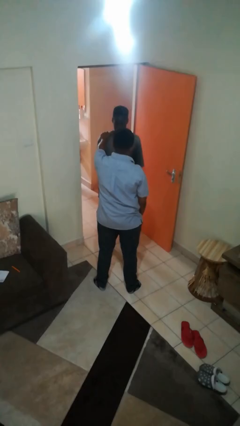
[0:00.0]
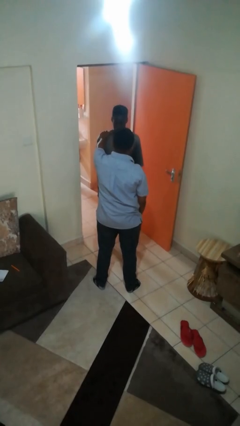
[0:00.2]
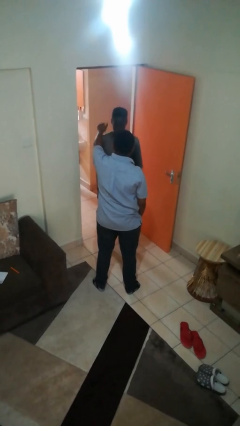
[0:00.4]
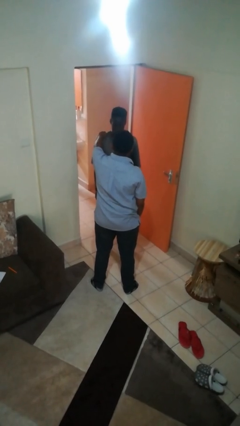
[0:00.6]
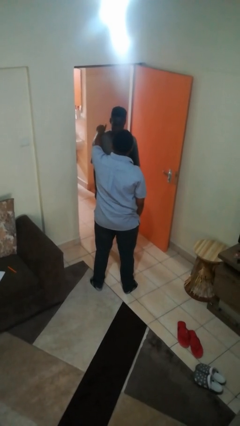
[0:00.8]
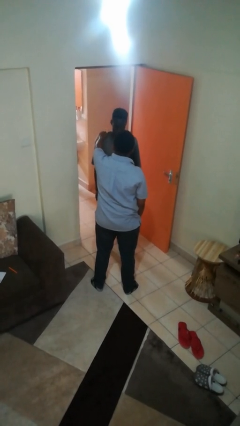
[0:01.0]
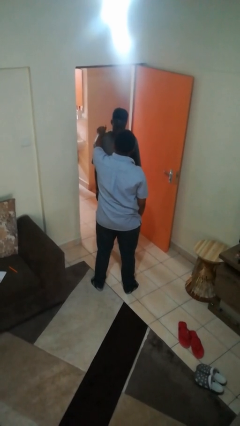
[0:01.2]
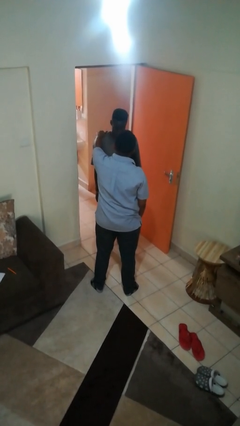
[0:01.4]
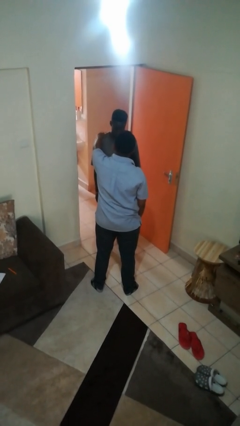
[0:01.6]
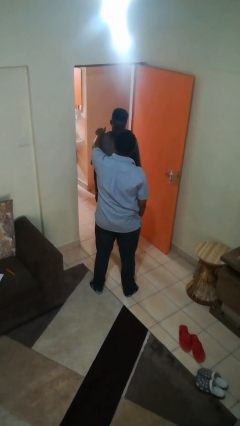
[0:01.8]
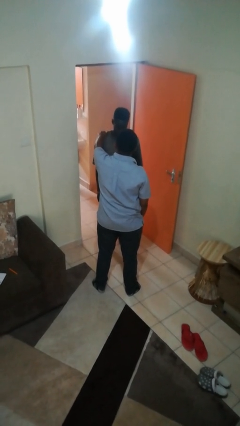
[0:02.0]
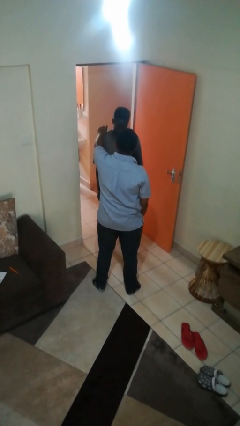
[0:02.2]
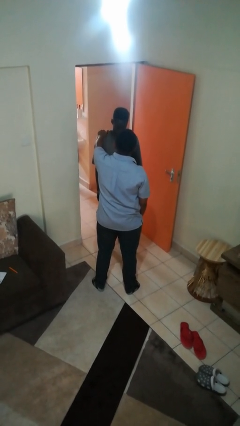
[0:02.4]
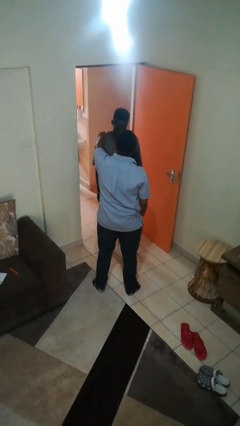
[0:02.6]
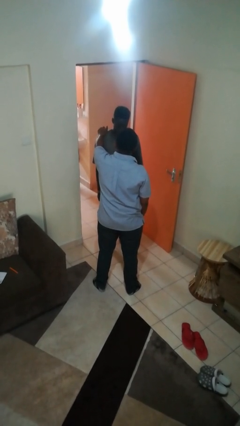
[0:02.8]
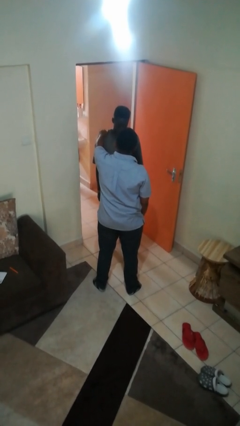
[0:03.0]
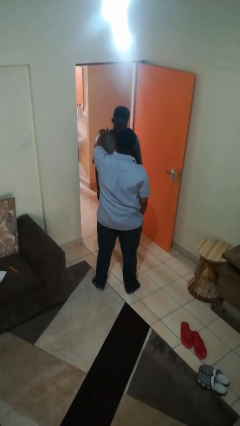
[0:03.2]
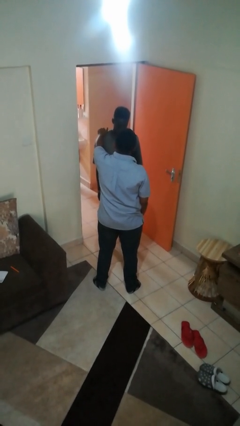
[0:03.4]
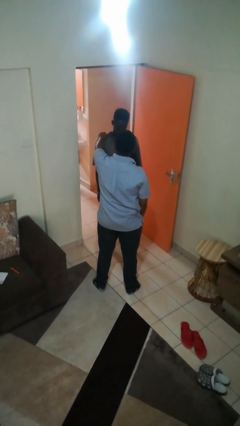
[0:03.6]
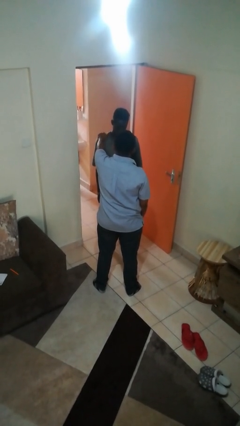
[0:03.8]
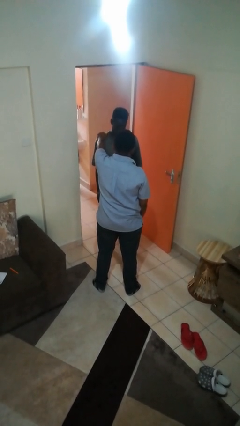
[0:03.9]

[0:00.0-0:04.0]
person pounds shoulders of person

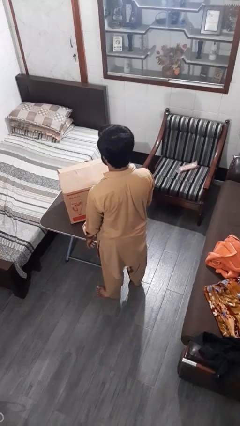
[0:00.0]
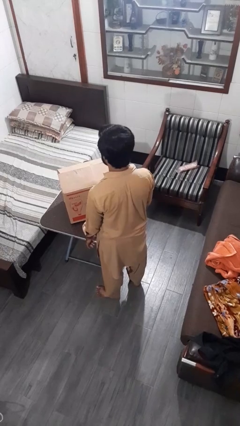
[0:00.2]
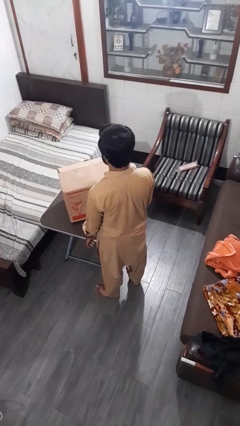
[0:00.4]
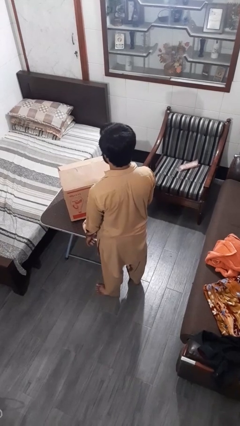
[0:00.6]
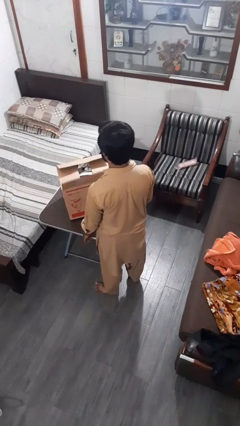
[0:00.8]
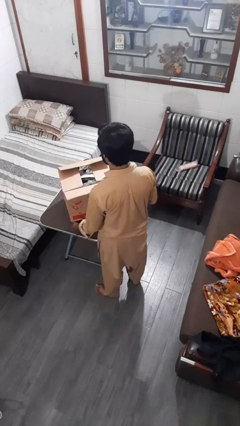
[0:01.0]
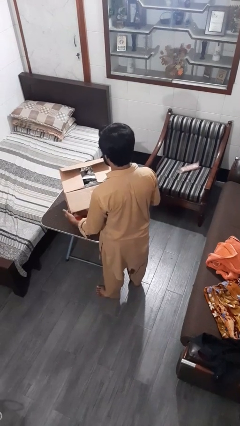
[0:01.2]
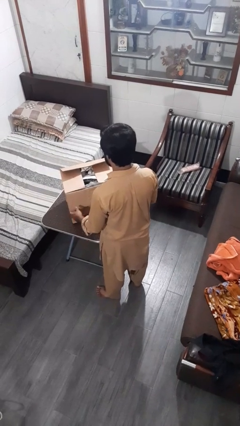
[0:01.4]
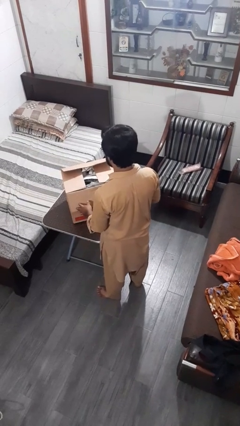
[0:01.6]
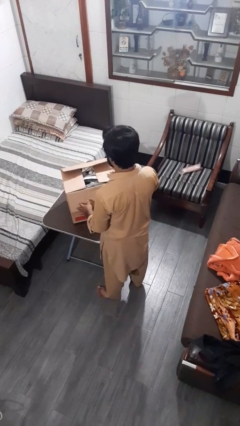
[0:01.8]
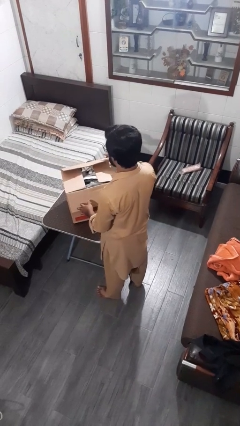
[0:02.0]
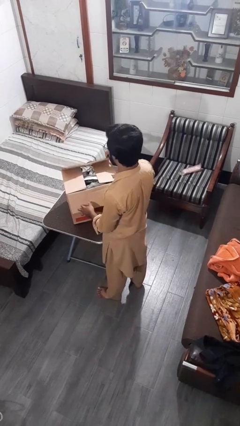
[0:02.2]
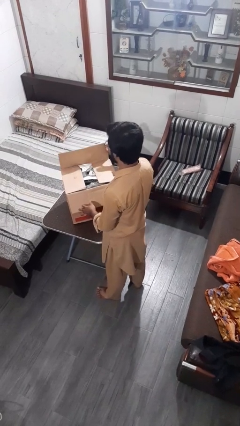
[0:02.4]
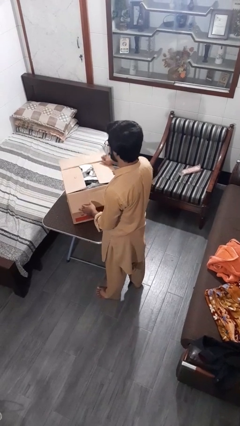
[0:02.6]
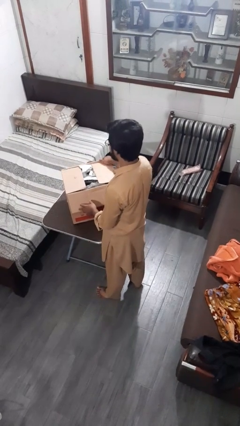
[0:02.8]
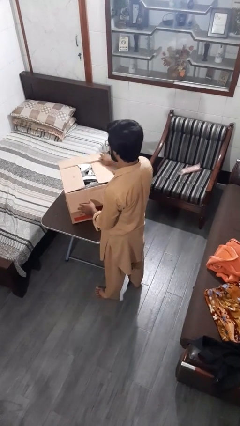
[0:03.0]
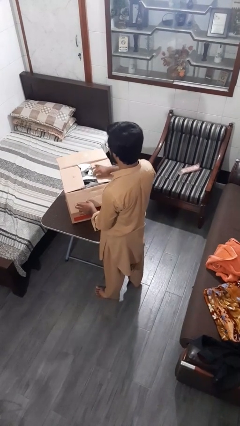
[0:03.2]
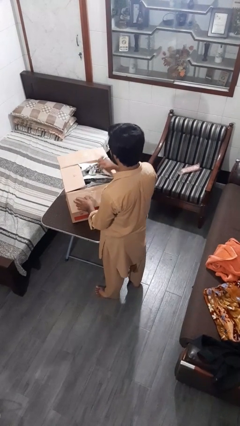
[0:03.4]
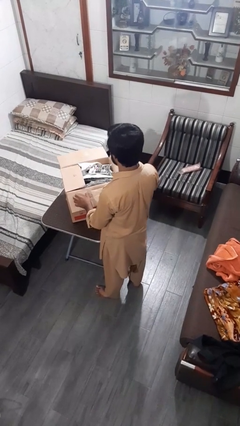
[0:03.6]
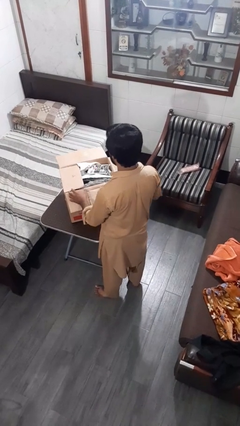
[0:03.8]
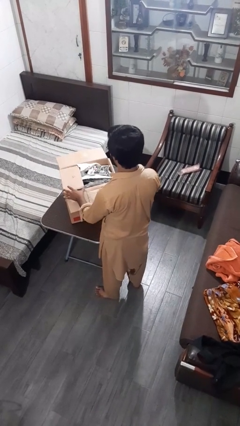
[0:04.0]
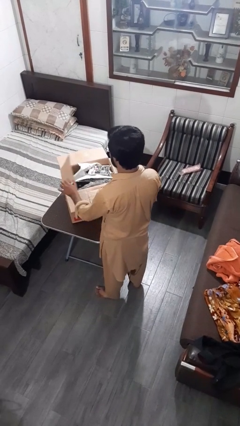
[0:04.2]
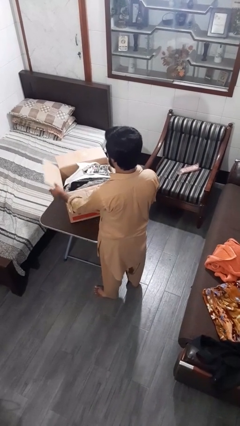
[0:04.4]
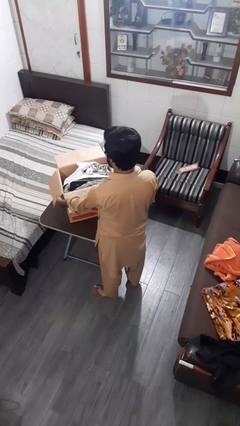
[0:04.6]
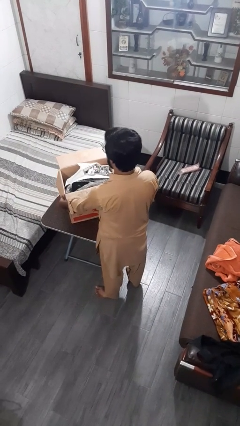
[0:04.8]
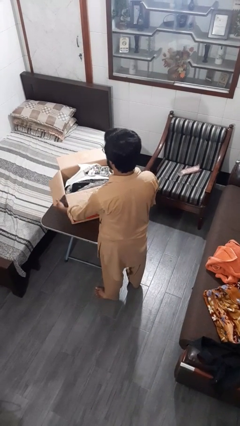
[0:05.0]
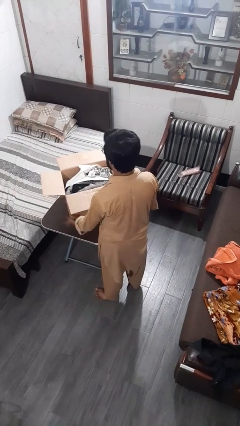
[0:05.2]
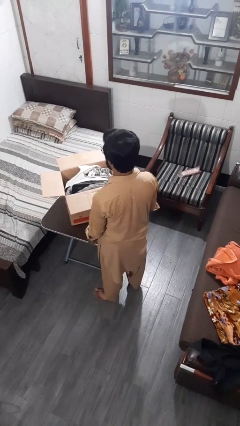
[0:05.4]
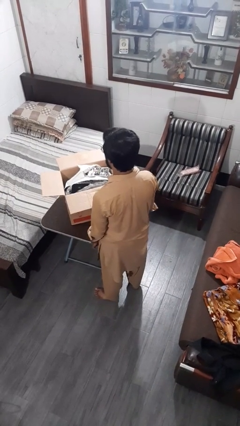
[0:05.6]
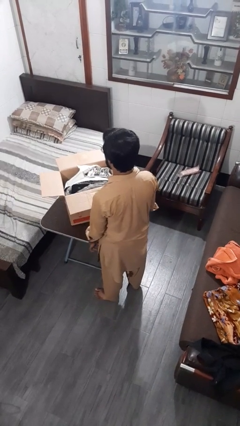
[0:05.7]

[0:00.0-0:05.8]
person opens box

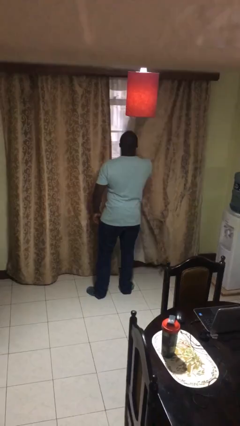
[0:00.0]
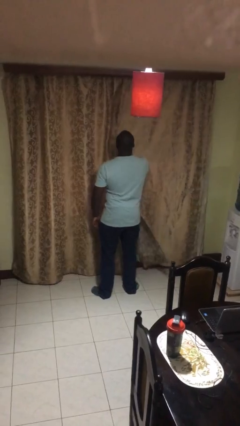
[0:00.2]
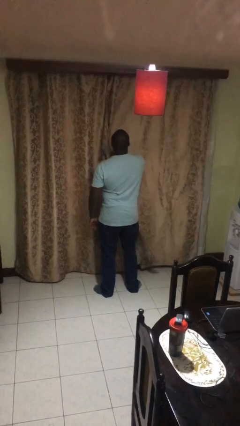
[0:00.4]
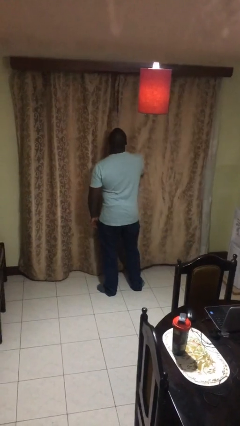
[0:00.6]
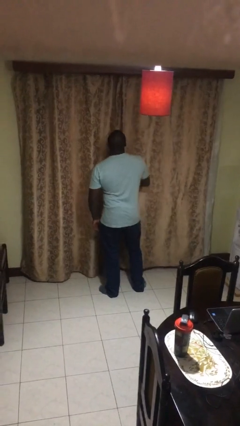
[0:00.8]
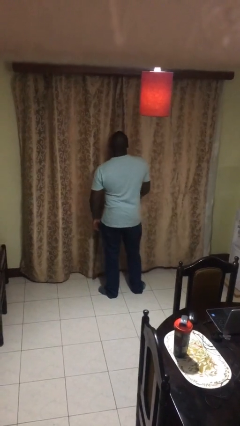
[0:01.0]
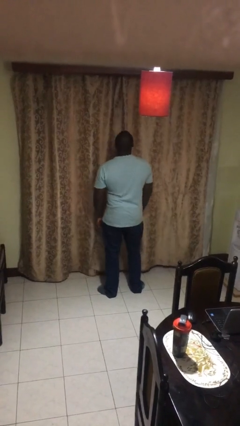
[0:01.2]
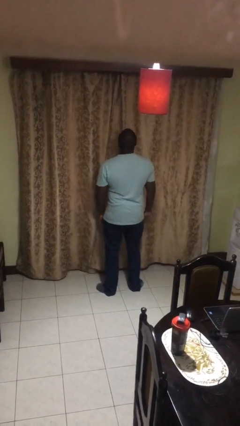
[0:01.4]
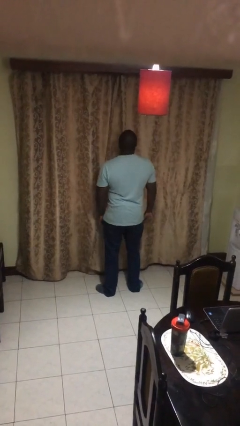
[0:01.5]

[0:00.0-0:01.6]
person closes curtains

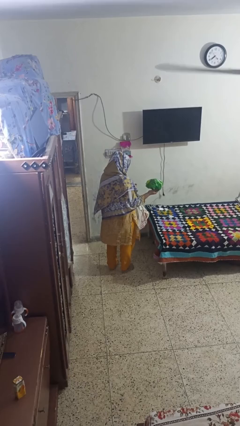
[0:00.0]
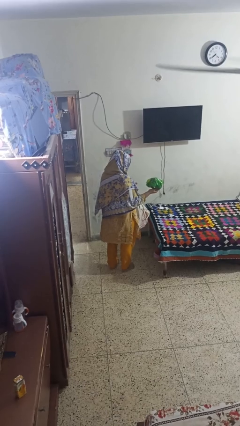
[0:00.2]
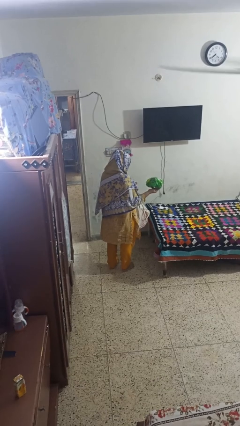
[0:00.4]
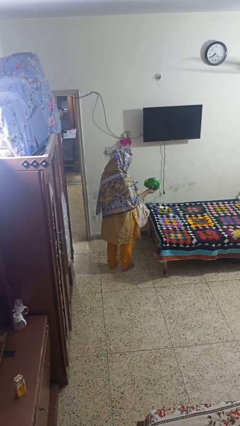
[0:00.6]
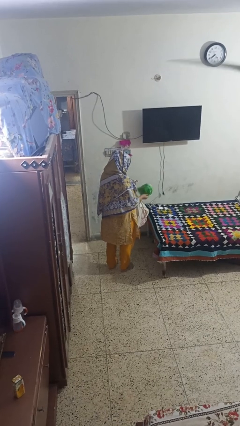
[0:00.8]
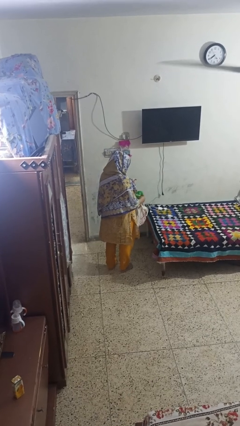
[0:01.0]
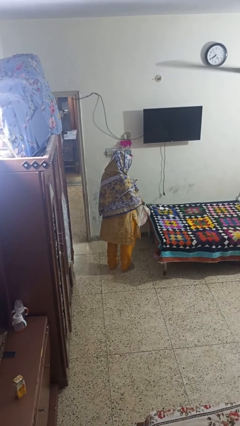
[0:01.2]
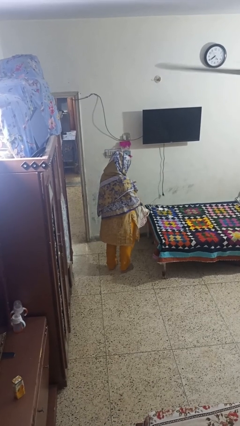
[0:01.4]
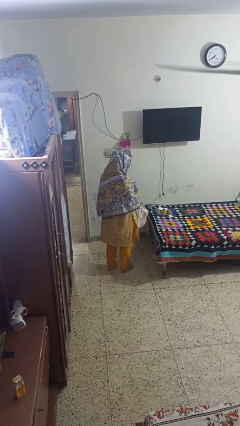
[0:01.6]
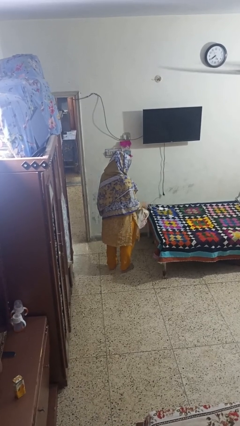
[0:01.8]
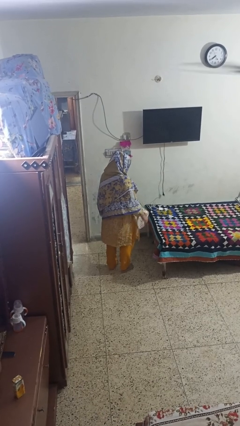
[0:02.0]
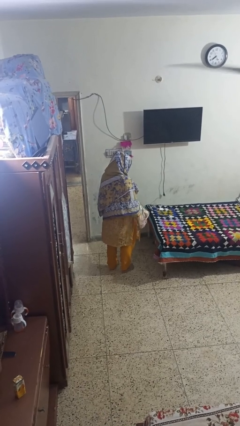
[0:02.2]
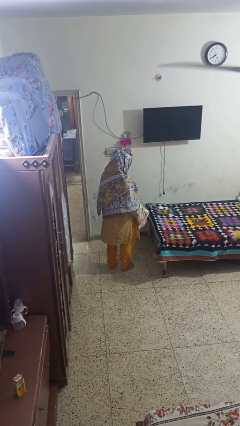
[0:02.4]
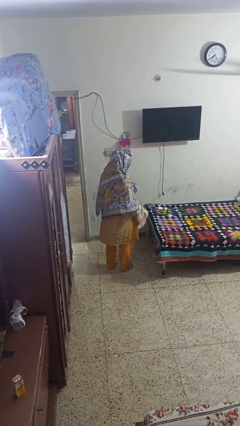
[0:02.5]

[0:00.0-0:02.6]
person puts object into bag

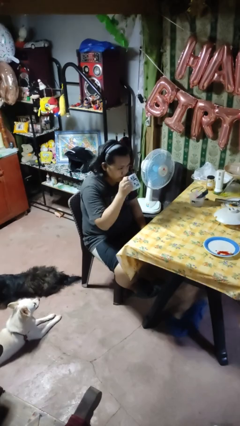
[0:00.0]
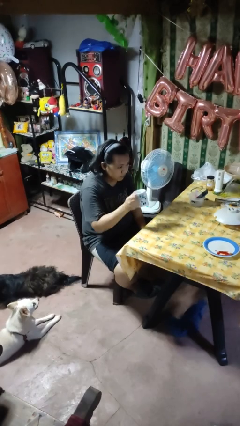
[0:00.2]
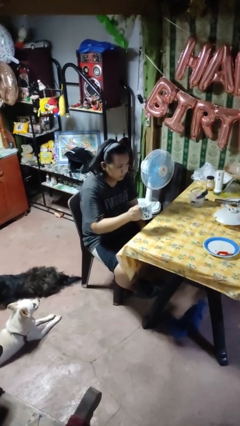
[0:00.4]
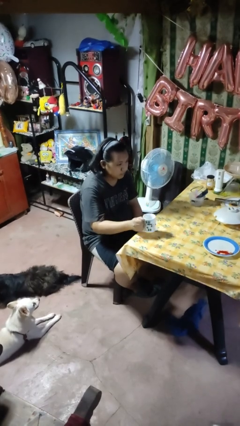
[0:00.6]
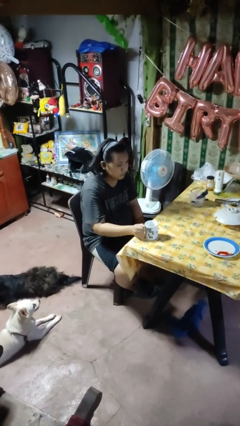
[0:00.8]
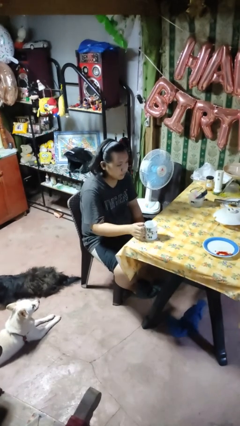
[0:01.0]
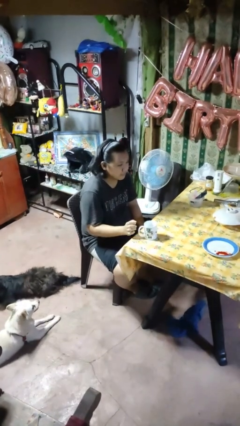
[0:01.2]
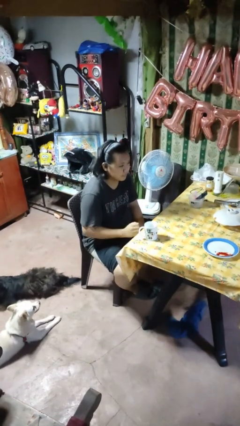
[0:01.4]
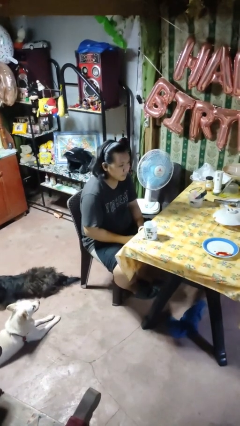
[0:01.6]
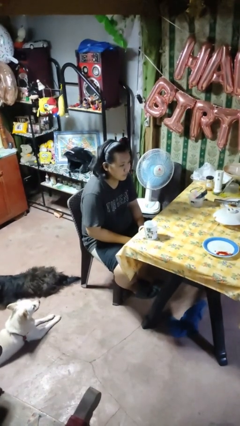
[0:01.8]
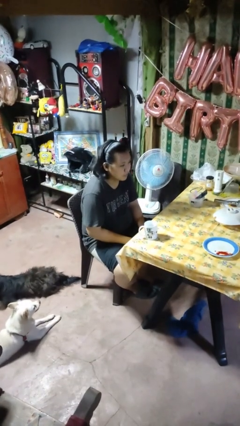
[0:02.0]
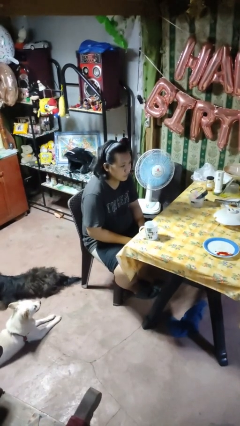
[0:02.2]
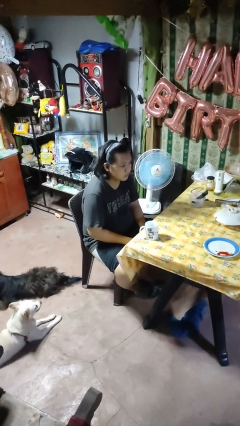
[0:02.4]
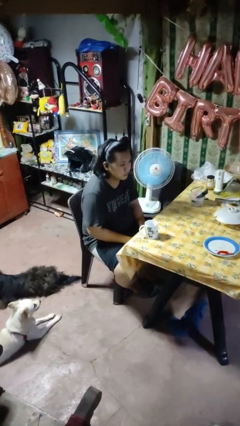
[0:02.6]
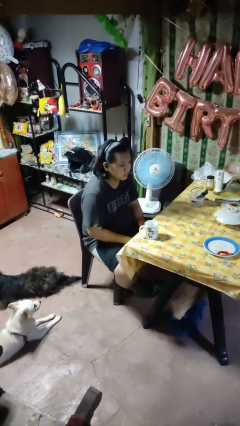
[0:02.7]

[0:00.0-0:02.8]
person puts down object on table

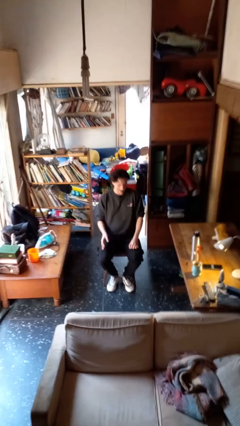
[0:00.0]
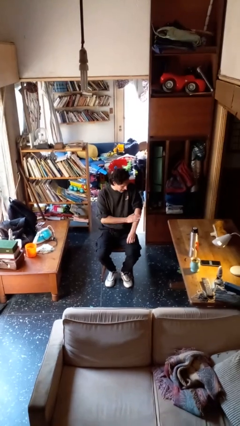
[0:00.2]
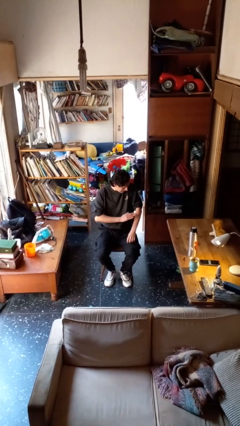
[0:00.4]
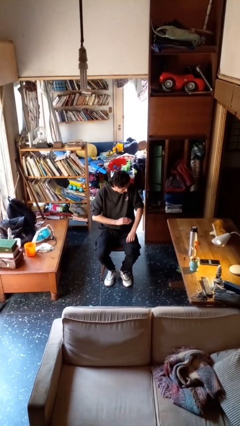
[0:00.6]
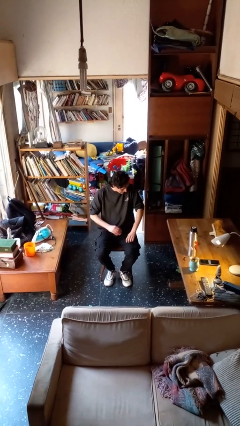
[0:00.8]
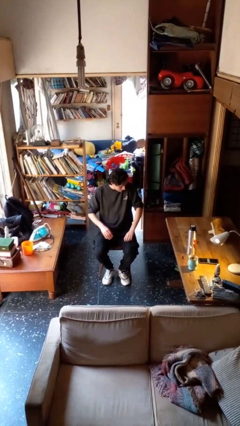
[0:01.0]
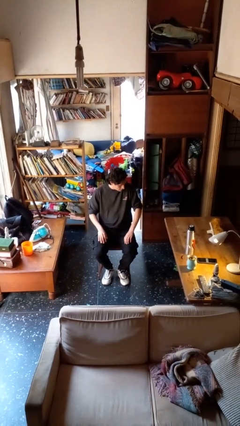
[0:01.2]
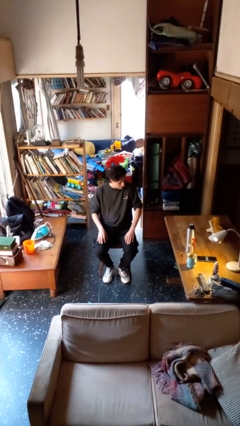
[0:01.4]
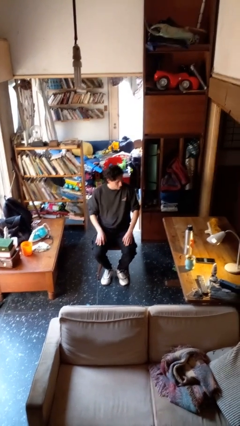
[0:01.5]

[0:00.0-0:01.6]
person swats bug
